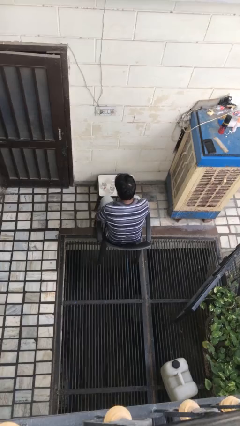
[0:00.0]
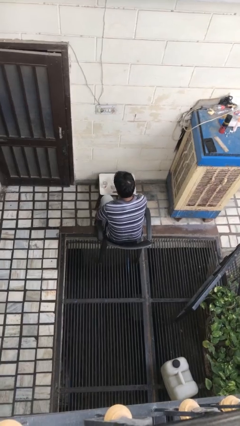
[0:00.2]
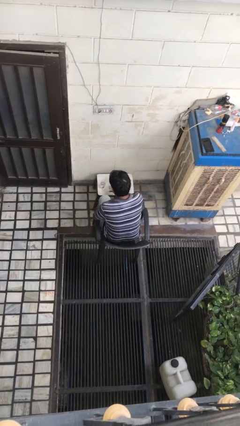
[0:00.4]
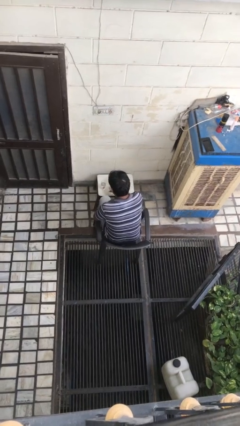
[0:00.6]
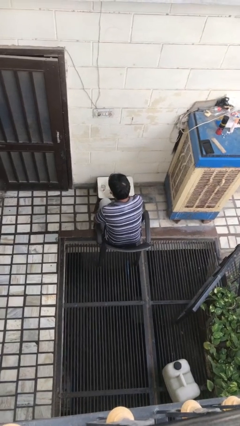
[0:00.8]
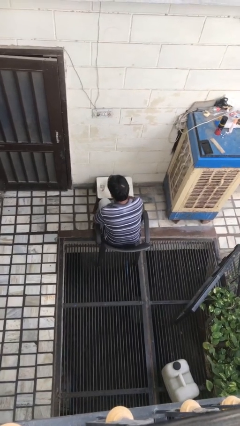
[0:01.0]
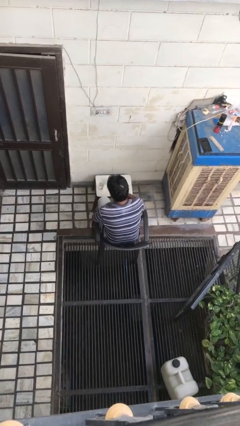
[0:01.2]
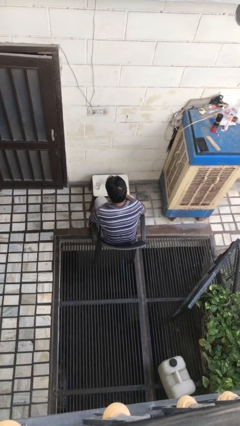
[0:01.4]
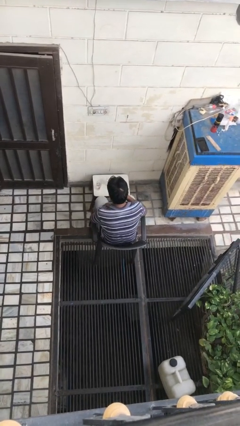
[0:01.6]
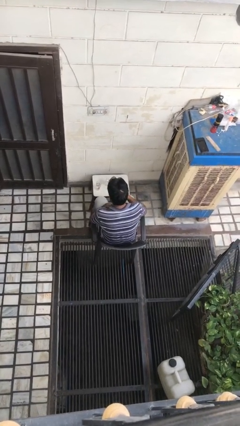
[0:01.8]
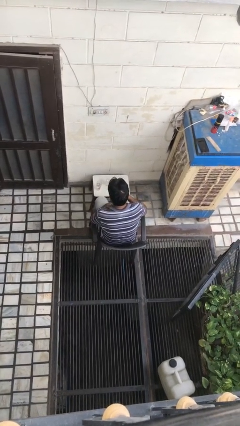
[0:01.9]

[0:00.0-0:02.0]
person picks up object from table

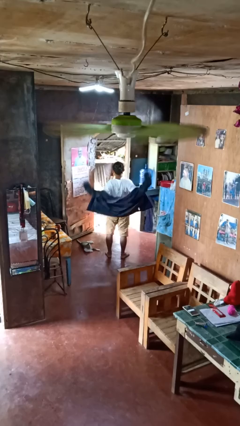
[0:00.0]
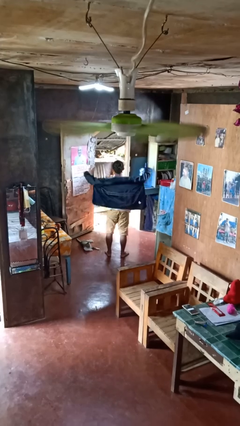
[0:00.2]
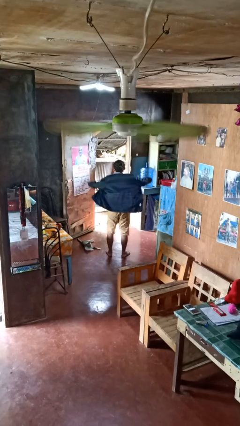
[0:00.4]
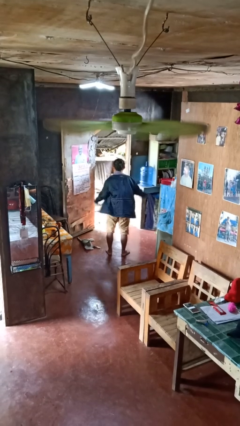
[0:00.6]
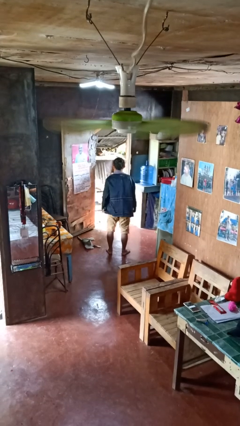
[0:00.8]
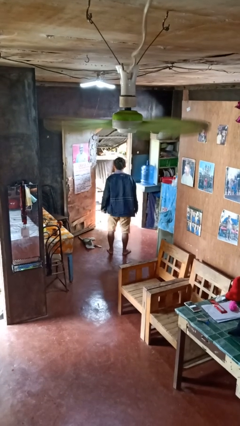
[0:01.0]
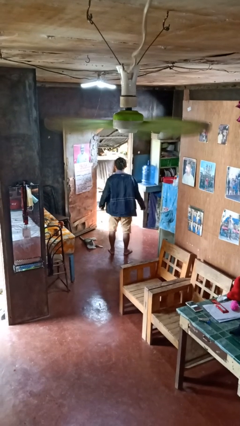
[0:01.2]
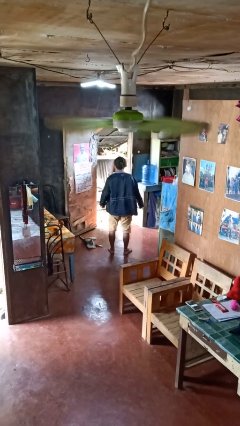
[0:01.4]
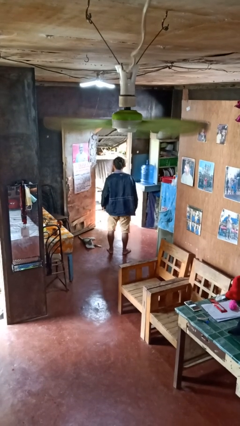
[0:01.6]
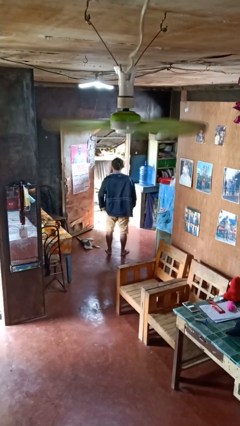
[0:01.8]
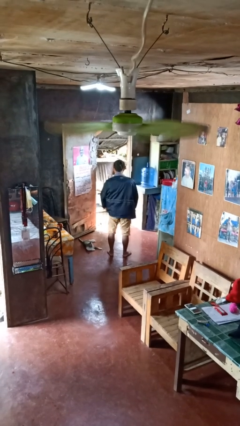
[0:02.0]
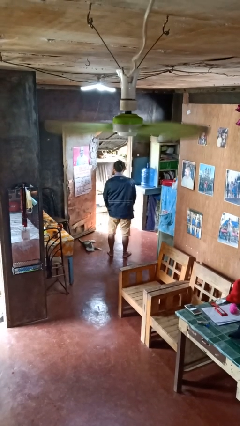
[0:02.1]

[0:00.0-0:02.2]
person puts on jacket

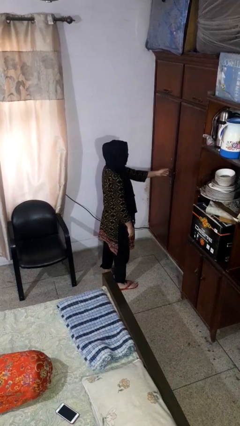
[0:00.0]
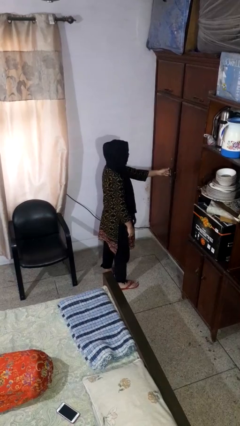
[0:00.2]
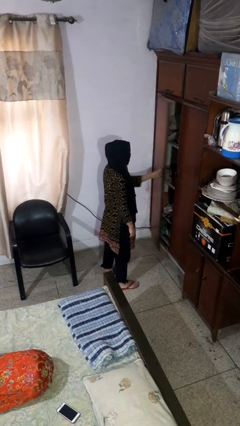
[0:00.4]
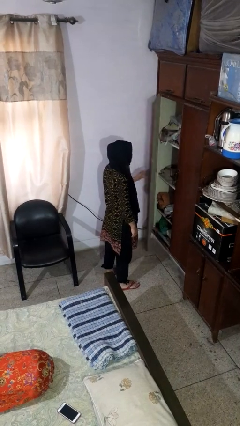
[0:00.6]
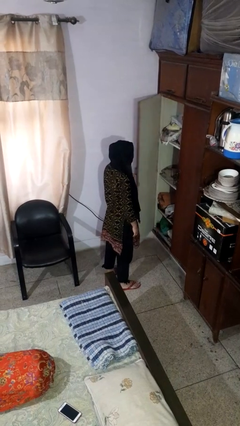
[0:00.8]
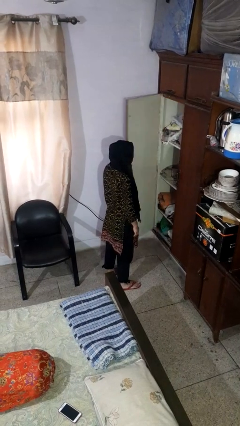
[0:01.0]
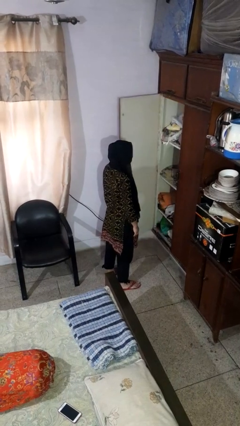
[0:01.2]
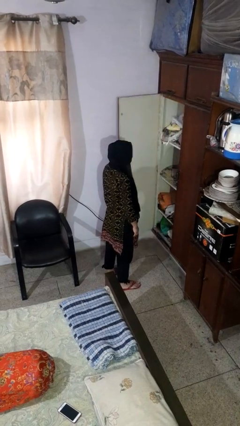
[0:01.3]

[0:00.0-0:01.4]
person opens closet door

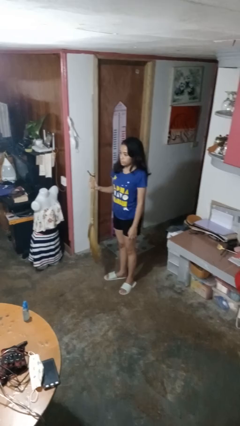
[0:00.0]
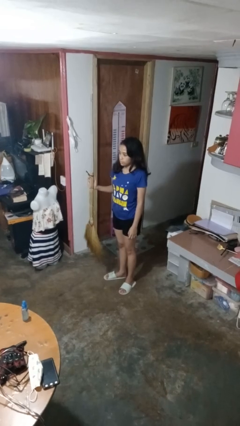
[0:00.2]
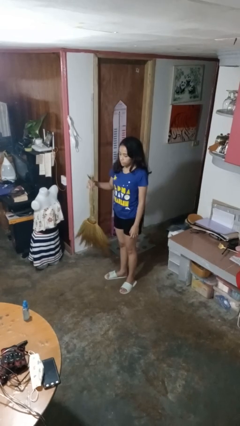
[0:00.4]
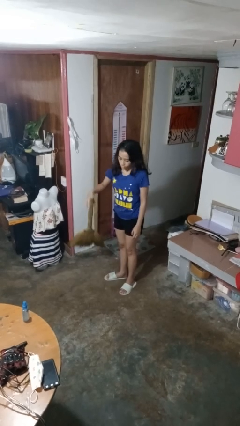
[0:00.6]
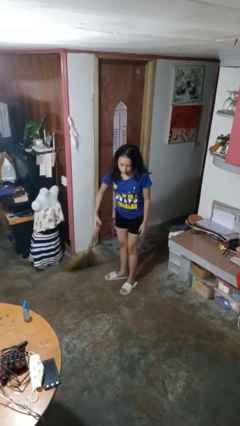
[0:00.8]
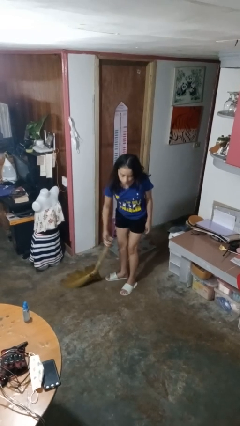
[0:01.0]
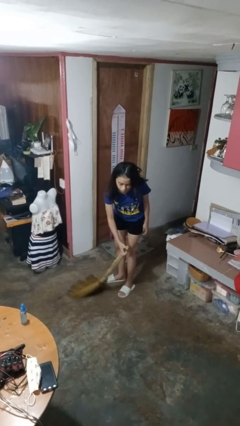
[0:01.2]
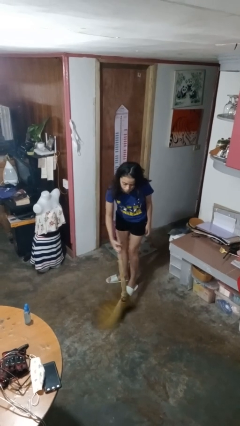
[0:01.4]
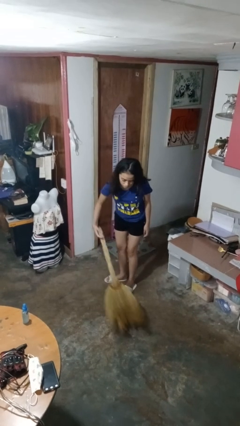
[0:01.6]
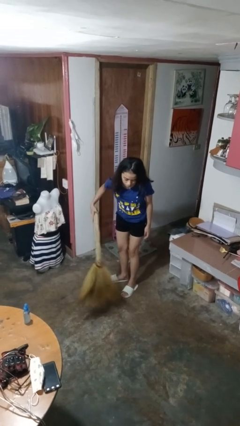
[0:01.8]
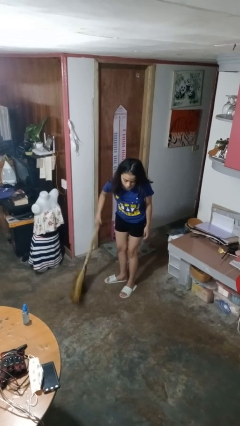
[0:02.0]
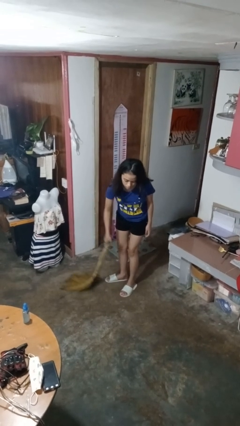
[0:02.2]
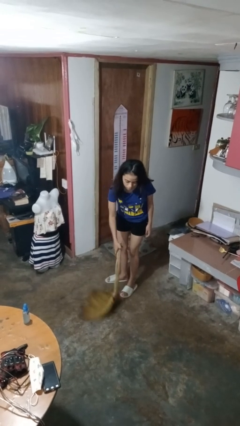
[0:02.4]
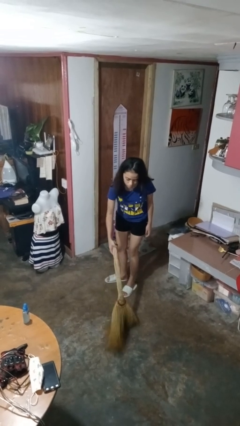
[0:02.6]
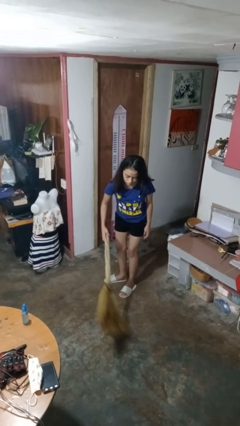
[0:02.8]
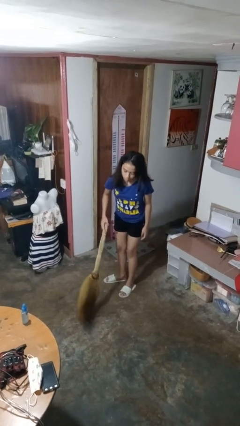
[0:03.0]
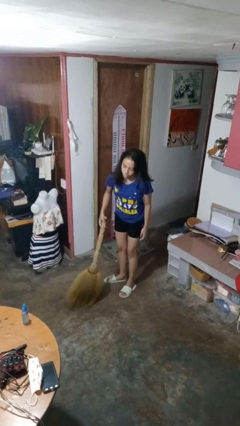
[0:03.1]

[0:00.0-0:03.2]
person sweeps floor

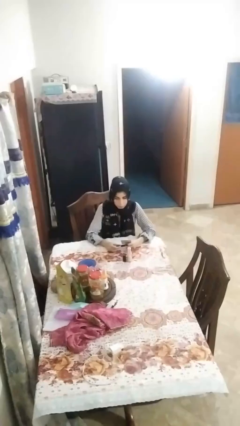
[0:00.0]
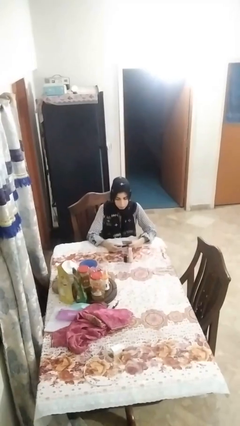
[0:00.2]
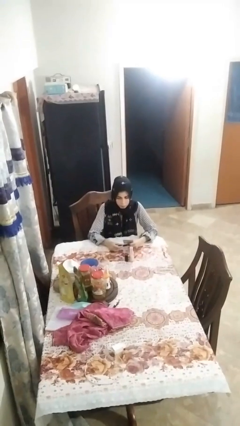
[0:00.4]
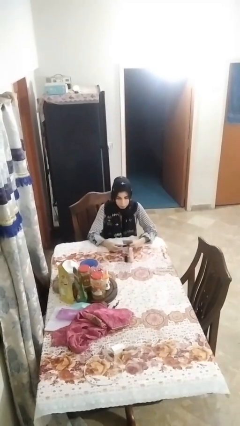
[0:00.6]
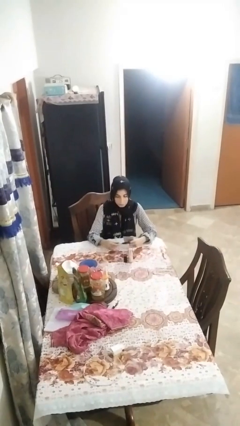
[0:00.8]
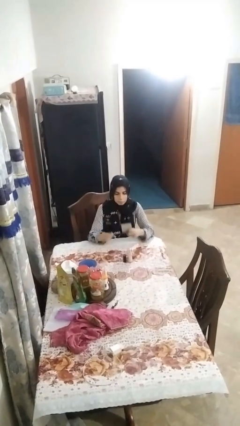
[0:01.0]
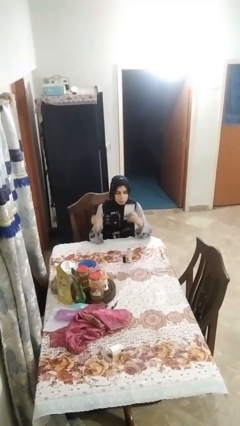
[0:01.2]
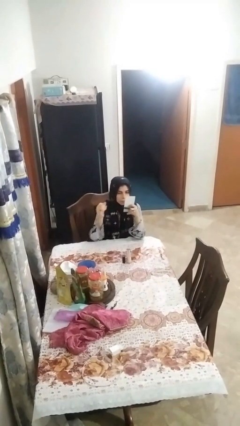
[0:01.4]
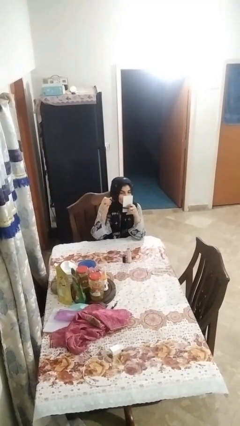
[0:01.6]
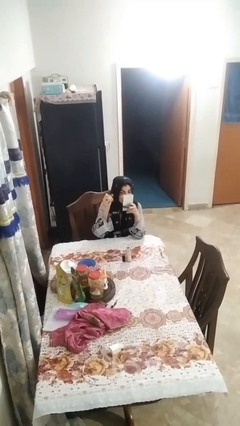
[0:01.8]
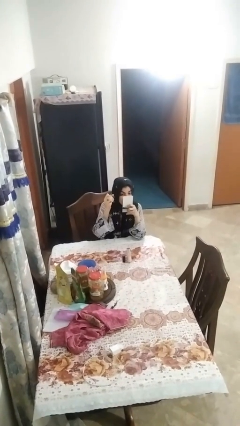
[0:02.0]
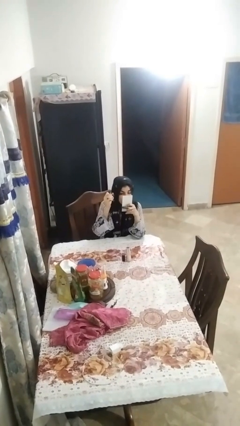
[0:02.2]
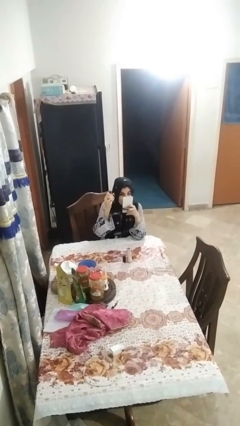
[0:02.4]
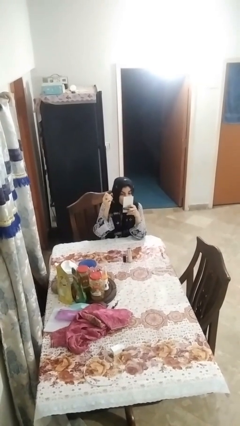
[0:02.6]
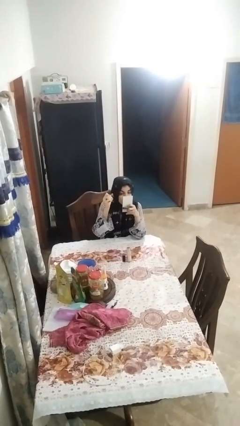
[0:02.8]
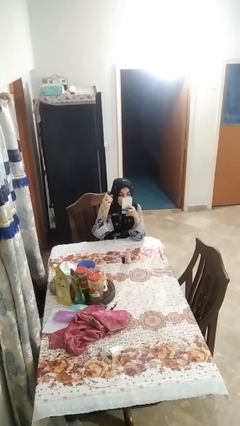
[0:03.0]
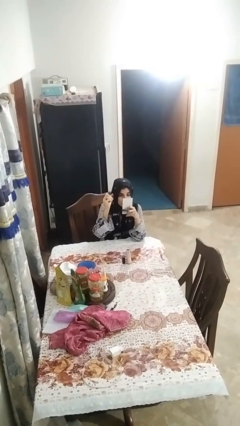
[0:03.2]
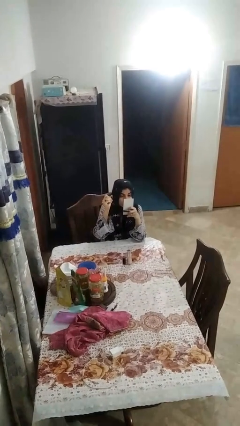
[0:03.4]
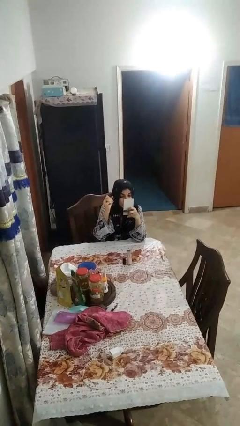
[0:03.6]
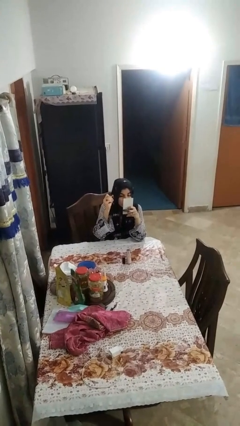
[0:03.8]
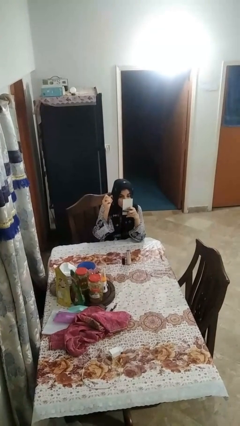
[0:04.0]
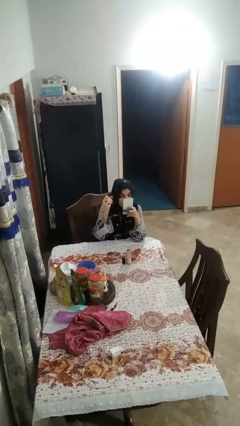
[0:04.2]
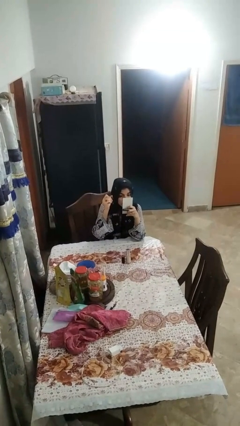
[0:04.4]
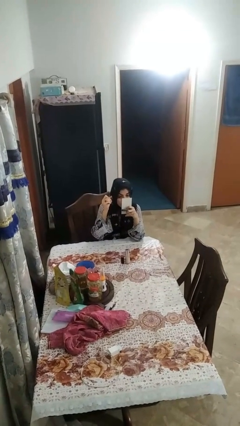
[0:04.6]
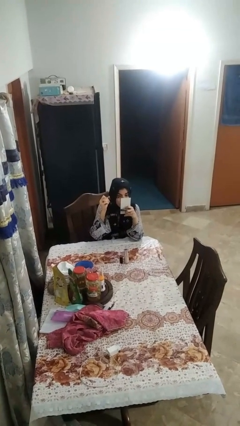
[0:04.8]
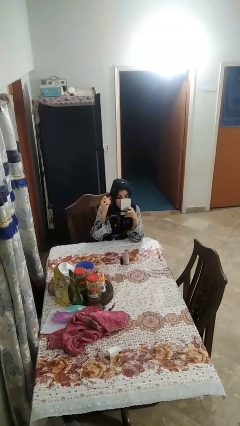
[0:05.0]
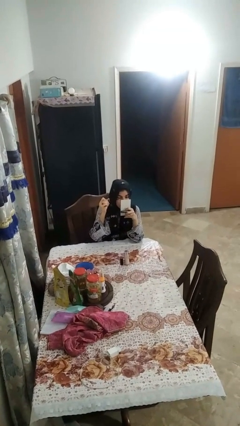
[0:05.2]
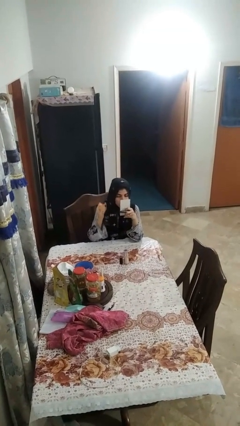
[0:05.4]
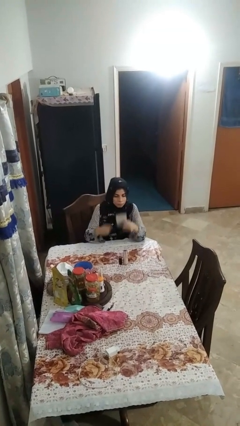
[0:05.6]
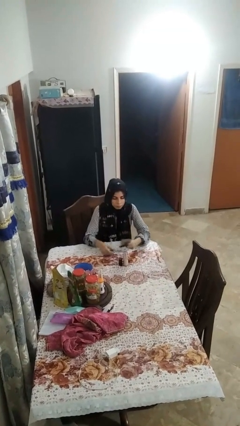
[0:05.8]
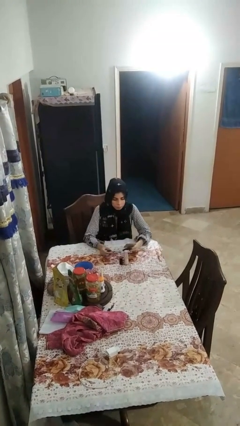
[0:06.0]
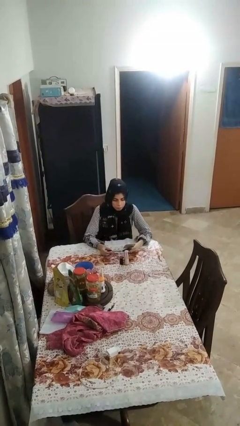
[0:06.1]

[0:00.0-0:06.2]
person applies eye makeup

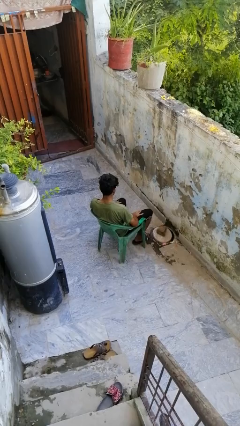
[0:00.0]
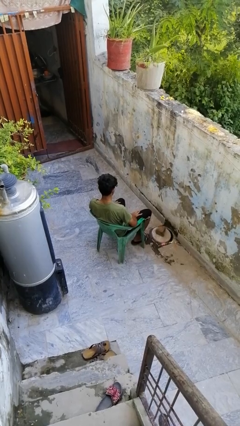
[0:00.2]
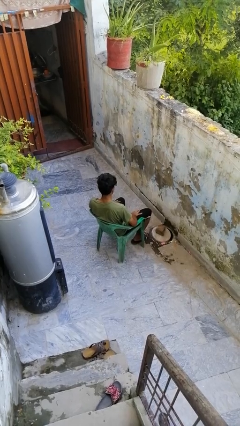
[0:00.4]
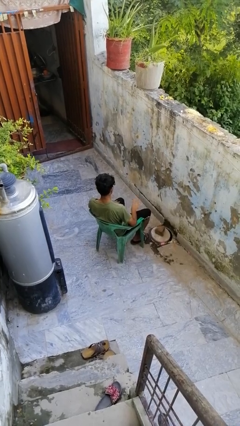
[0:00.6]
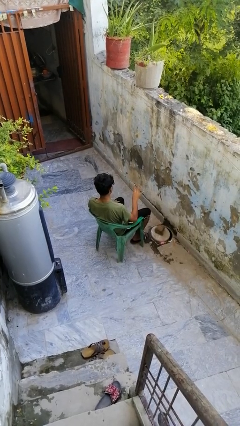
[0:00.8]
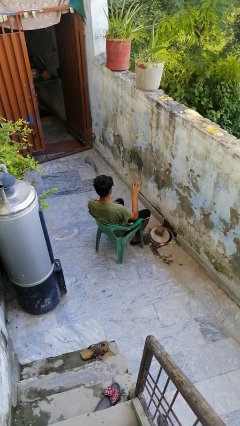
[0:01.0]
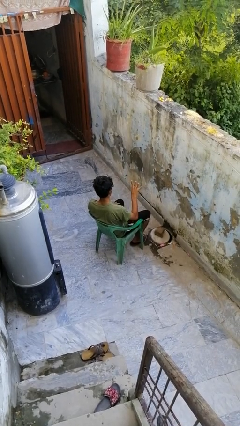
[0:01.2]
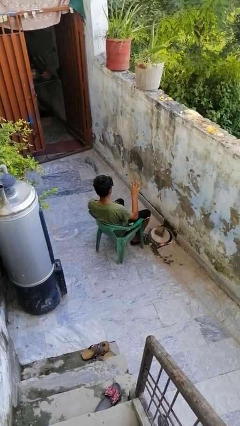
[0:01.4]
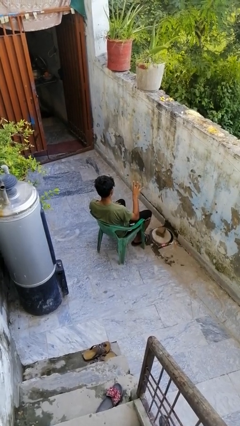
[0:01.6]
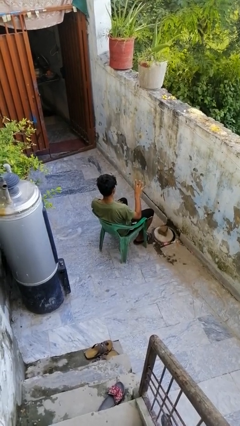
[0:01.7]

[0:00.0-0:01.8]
person gestures number four

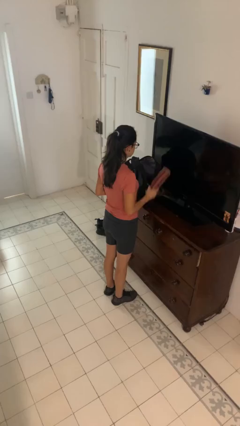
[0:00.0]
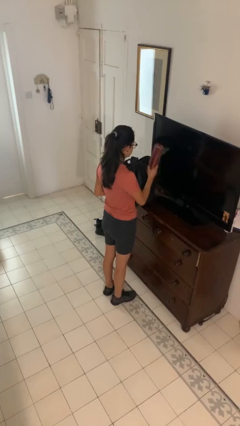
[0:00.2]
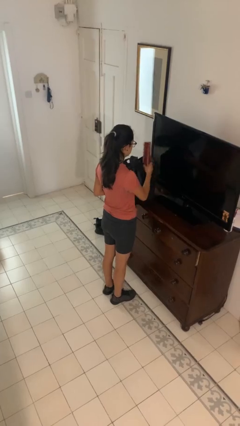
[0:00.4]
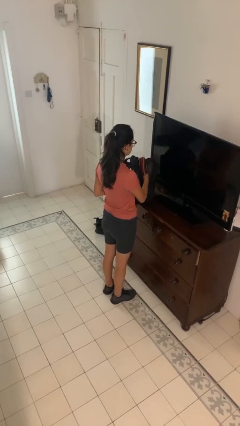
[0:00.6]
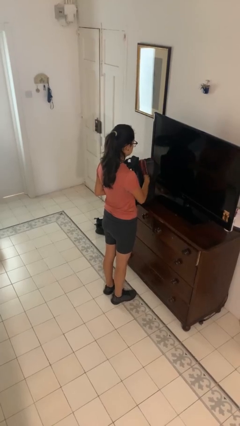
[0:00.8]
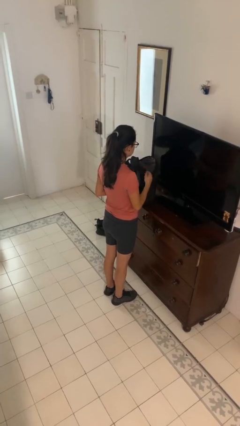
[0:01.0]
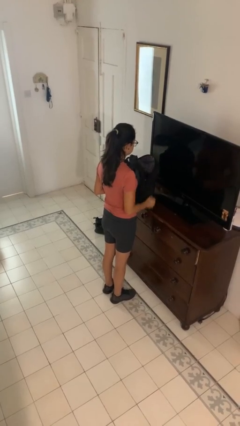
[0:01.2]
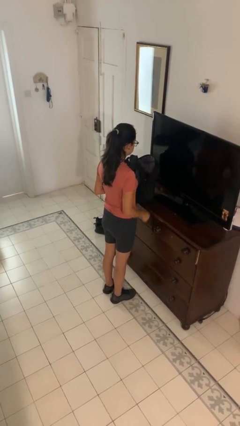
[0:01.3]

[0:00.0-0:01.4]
person puts object into bag
